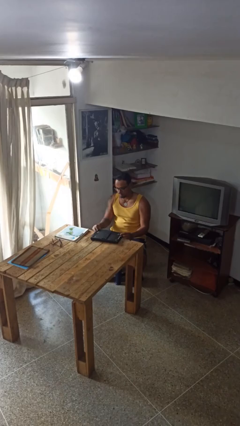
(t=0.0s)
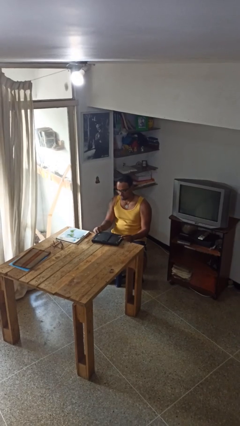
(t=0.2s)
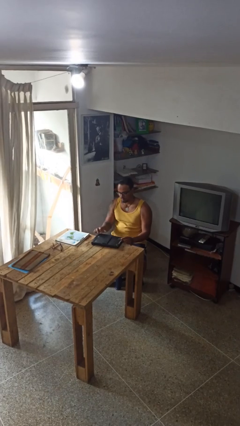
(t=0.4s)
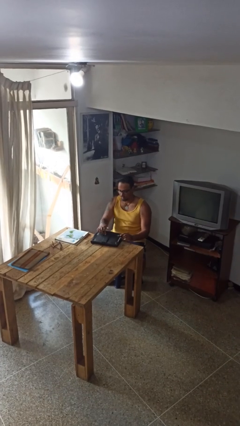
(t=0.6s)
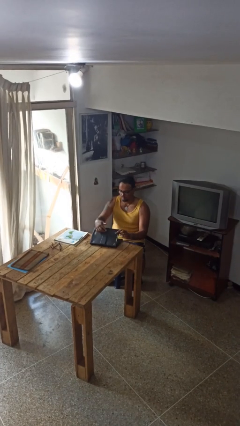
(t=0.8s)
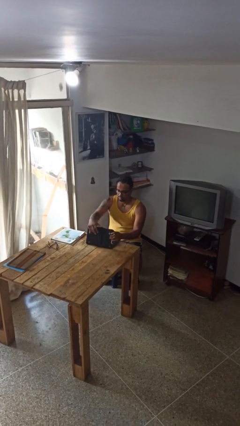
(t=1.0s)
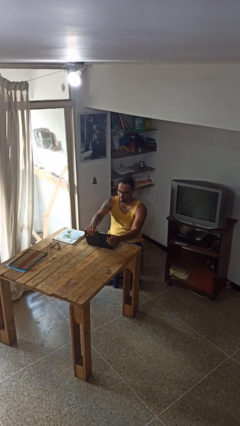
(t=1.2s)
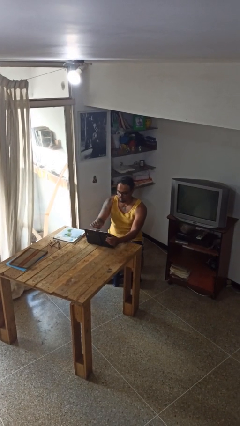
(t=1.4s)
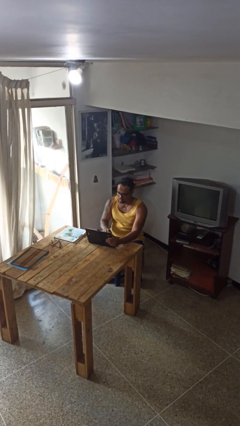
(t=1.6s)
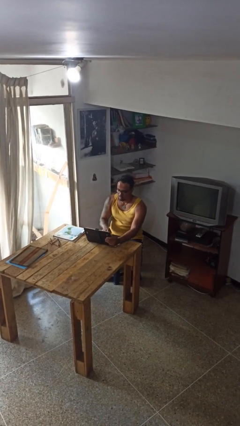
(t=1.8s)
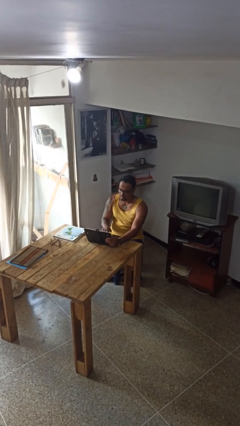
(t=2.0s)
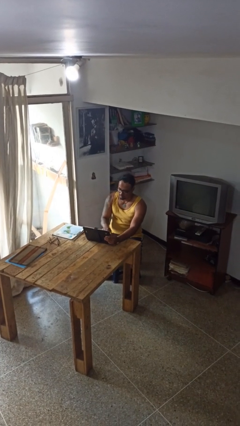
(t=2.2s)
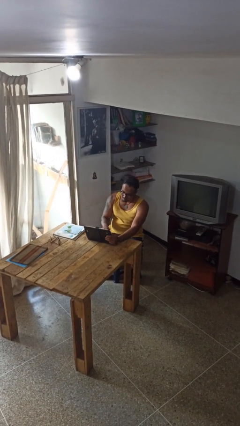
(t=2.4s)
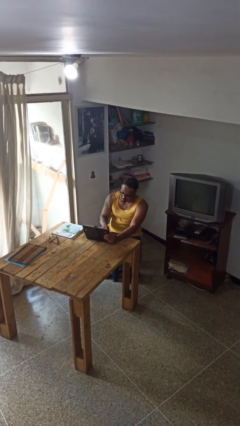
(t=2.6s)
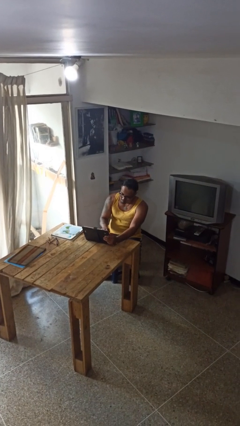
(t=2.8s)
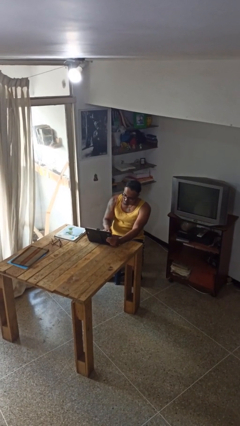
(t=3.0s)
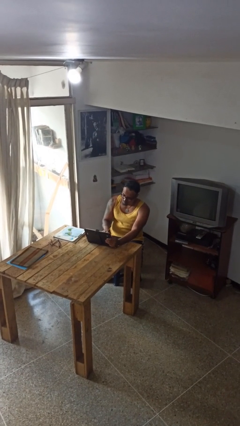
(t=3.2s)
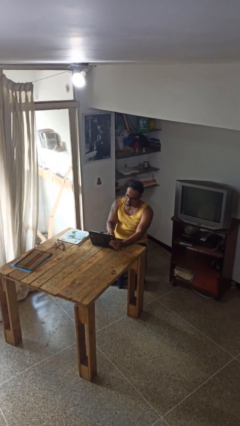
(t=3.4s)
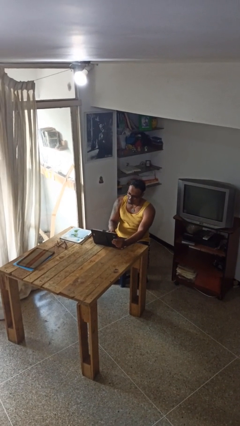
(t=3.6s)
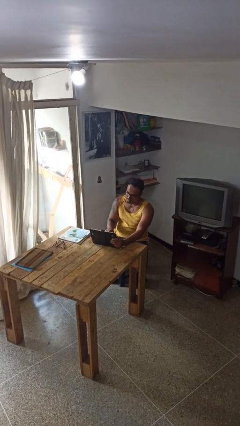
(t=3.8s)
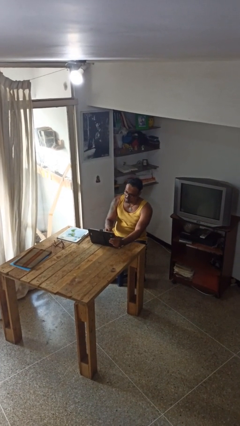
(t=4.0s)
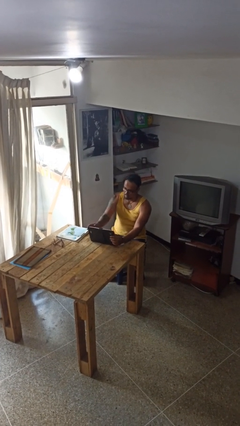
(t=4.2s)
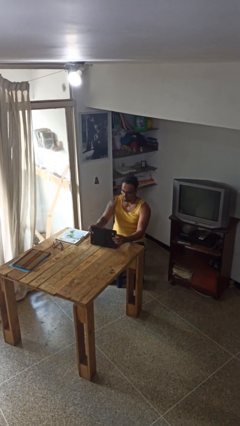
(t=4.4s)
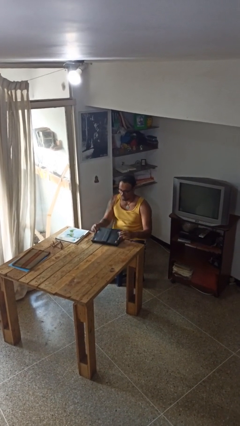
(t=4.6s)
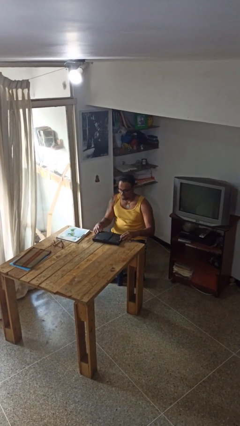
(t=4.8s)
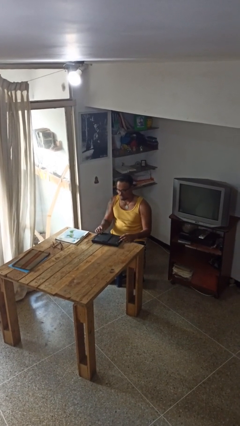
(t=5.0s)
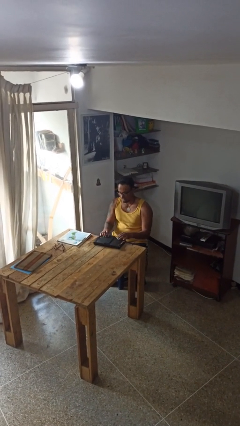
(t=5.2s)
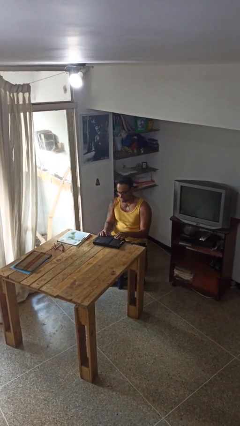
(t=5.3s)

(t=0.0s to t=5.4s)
person interacts with laptop

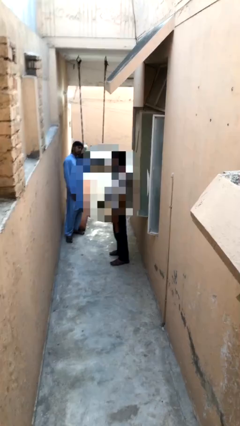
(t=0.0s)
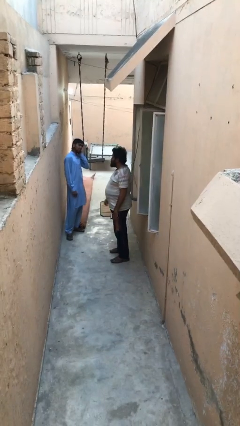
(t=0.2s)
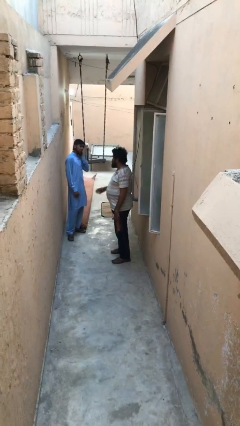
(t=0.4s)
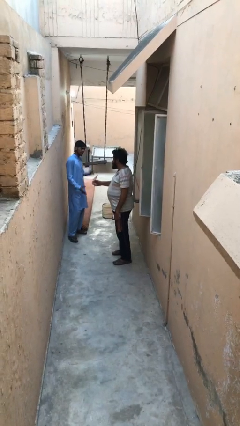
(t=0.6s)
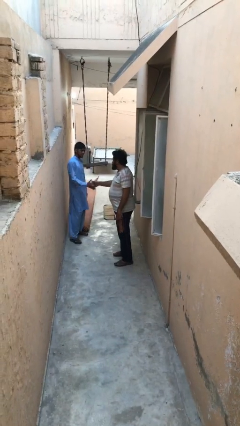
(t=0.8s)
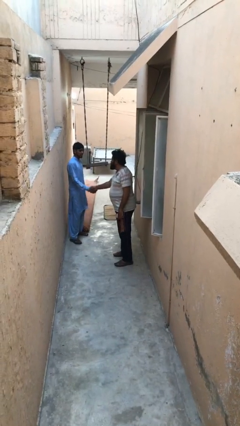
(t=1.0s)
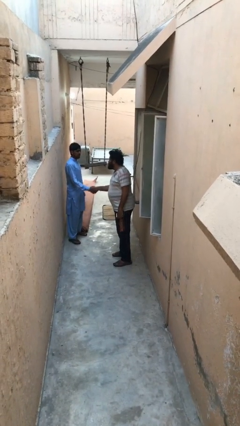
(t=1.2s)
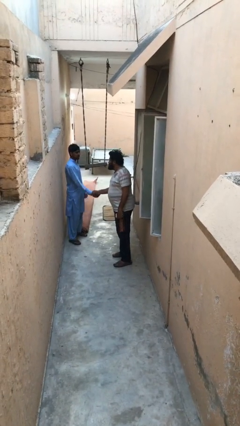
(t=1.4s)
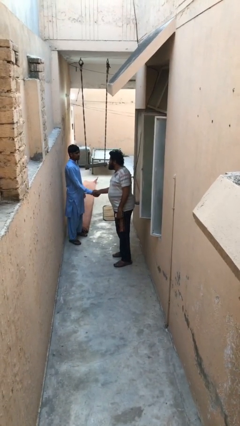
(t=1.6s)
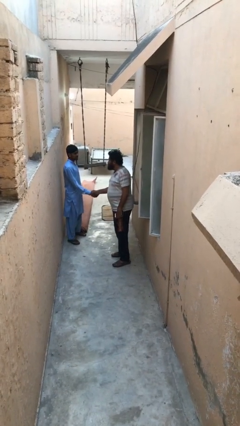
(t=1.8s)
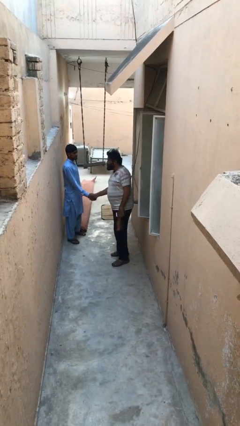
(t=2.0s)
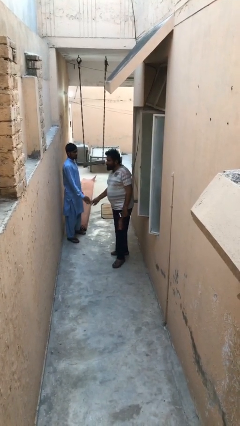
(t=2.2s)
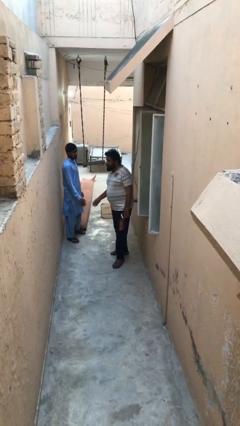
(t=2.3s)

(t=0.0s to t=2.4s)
person shakes hand

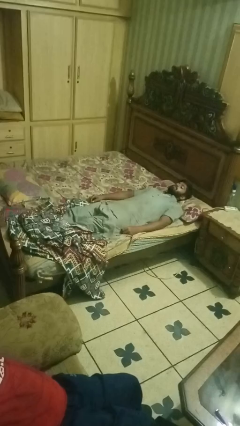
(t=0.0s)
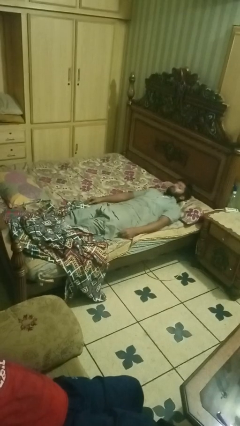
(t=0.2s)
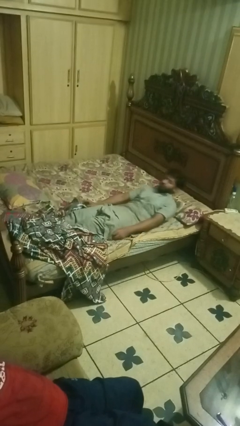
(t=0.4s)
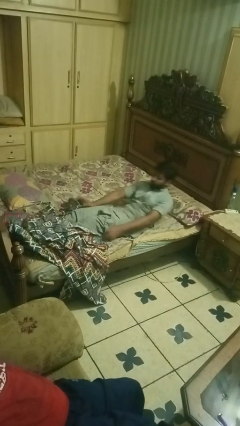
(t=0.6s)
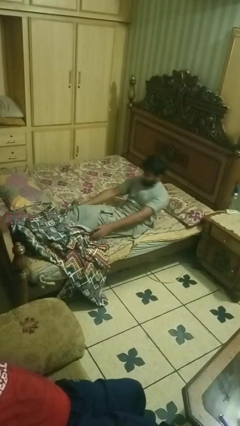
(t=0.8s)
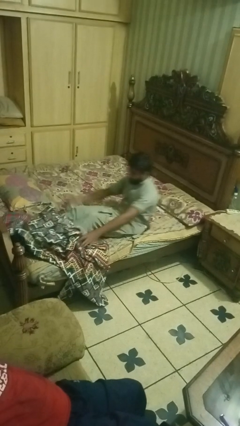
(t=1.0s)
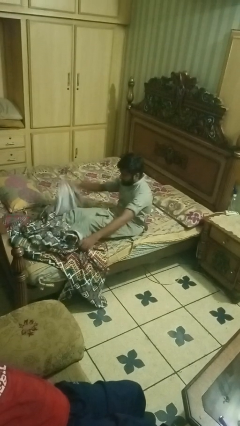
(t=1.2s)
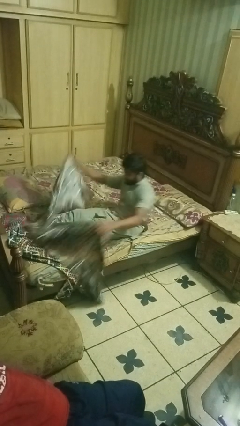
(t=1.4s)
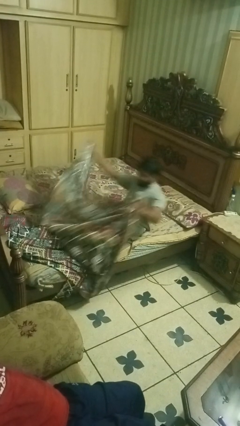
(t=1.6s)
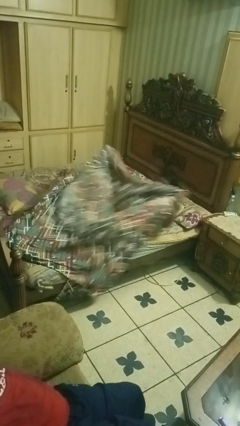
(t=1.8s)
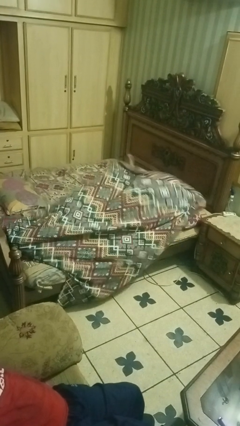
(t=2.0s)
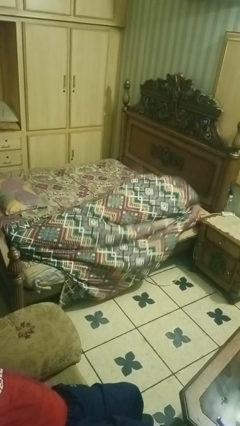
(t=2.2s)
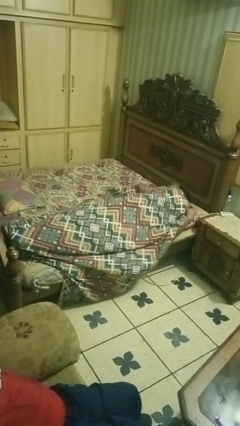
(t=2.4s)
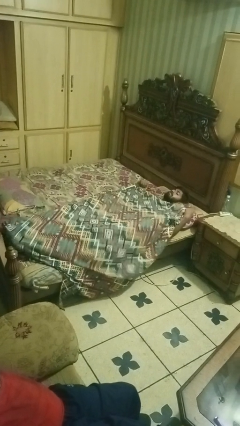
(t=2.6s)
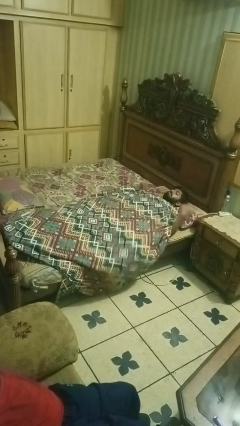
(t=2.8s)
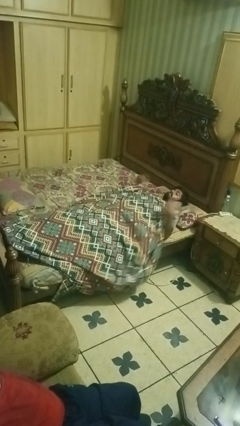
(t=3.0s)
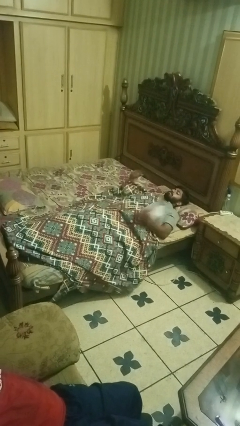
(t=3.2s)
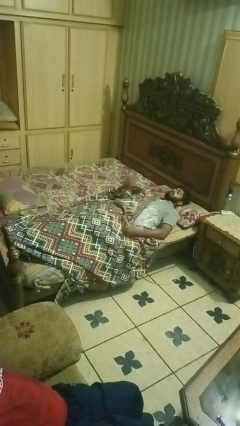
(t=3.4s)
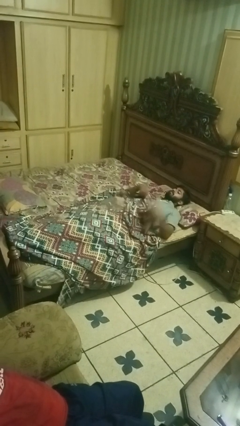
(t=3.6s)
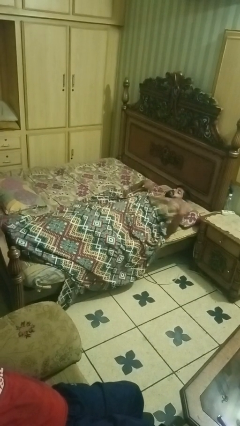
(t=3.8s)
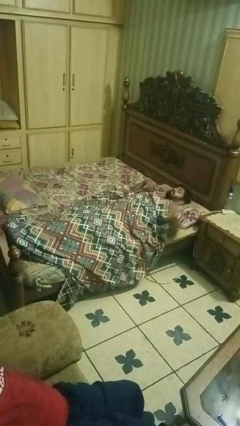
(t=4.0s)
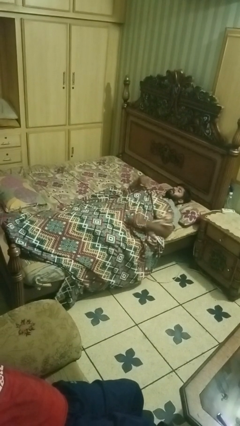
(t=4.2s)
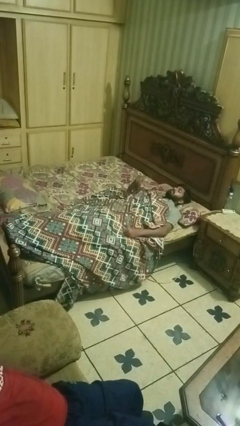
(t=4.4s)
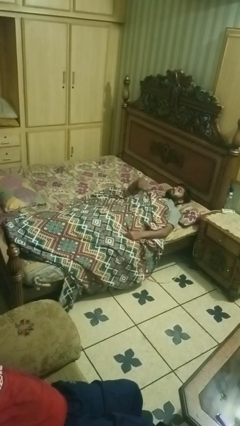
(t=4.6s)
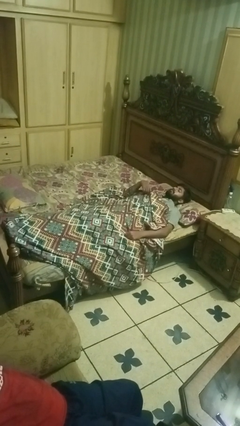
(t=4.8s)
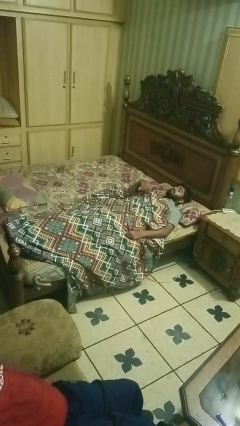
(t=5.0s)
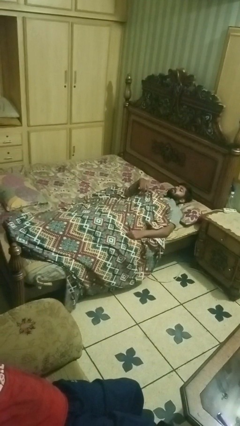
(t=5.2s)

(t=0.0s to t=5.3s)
person covers with bedsheets

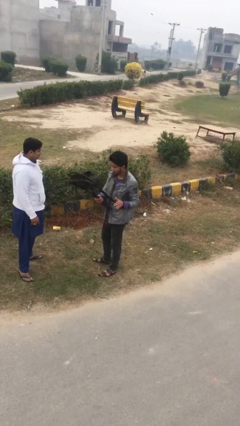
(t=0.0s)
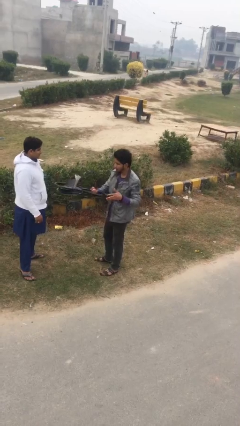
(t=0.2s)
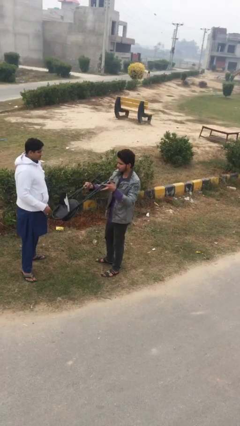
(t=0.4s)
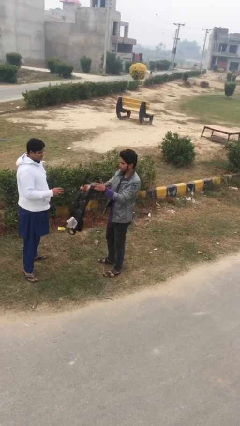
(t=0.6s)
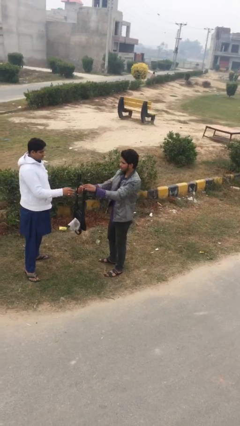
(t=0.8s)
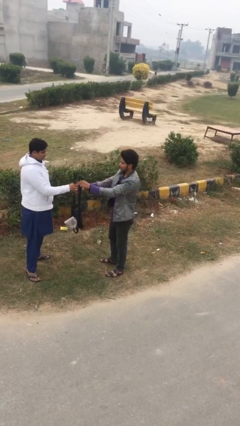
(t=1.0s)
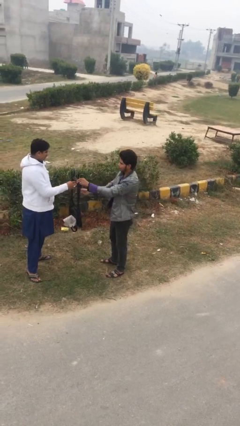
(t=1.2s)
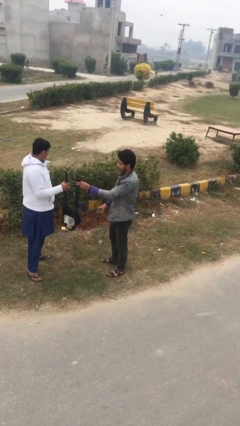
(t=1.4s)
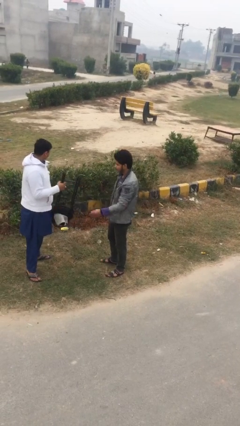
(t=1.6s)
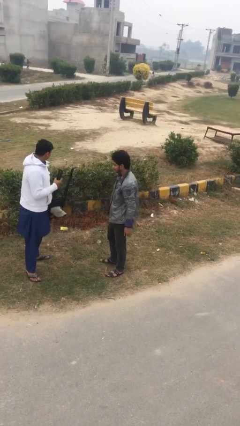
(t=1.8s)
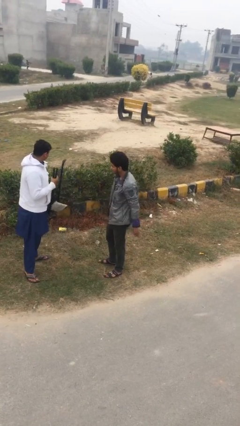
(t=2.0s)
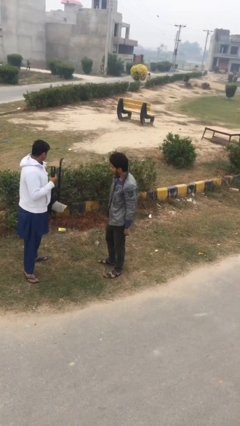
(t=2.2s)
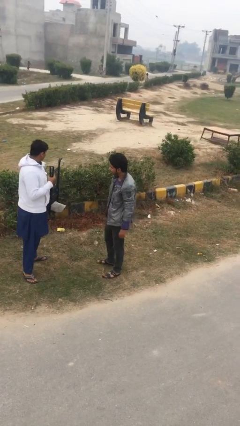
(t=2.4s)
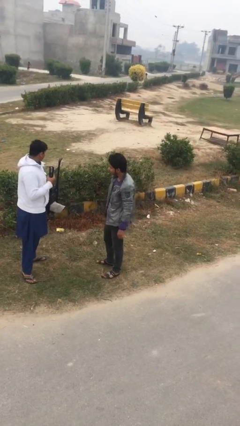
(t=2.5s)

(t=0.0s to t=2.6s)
person transfers object to person

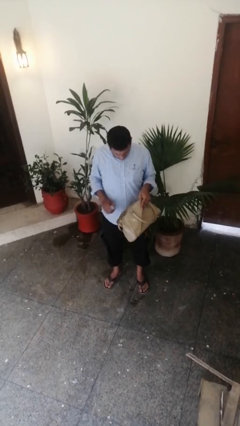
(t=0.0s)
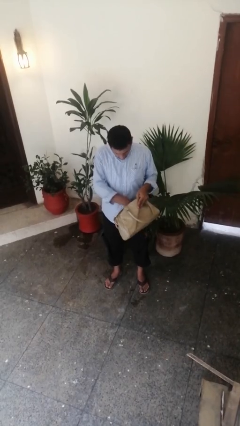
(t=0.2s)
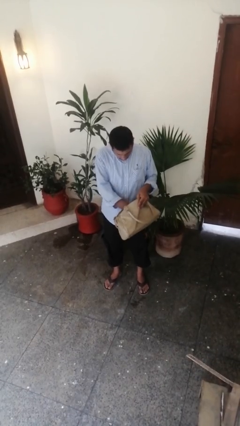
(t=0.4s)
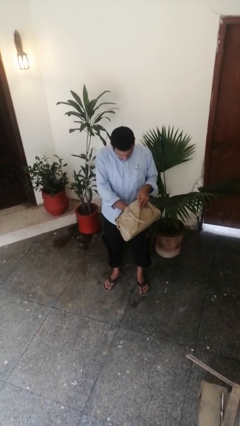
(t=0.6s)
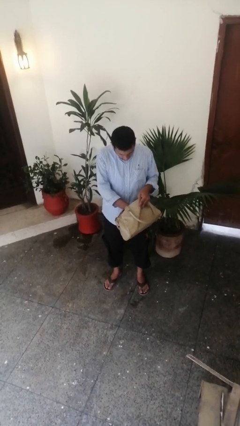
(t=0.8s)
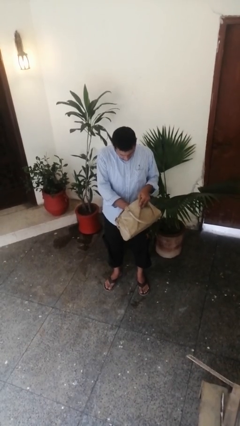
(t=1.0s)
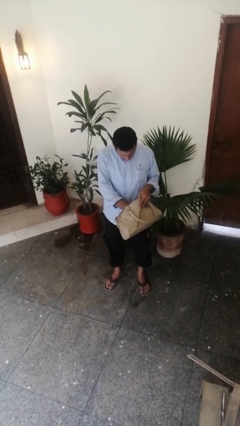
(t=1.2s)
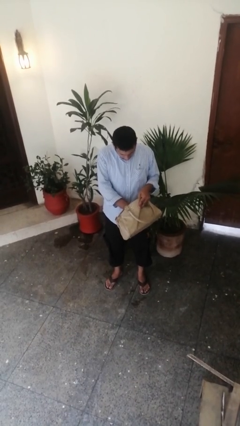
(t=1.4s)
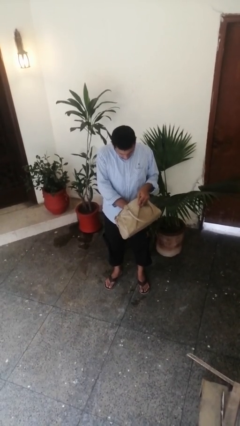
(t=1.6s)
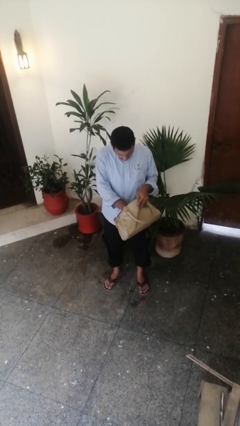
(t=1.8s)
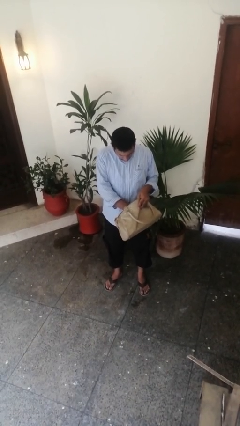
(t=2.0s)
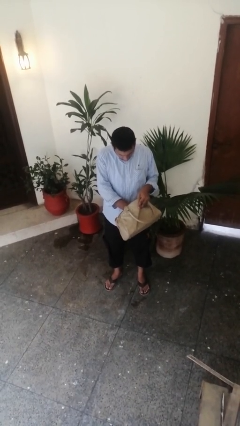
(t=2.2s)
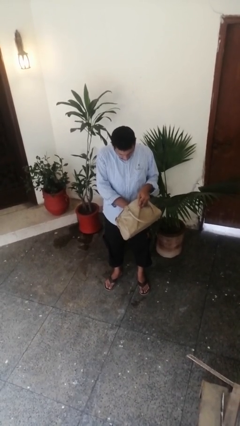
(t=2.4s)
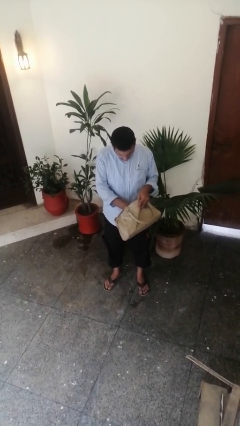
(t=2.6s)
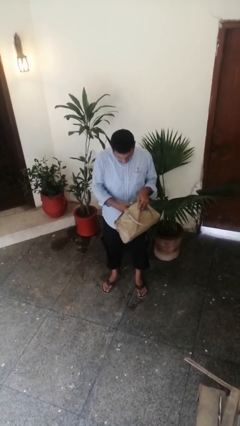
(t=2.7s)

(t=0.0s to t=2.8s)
person searches in purse
